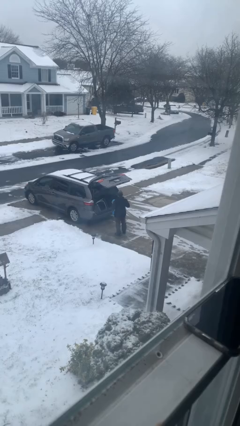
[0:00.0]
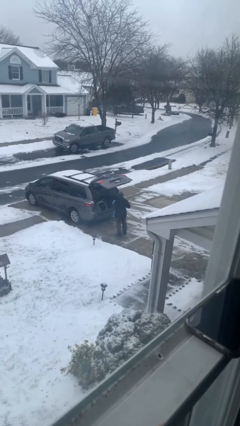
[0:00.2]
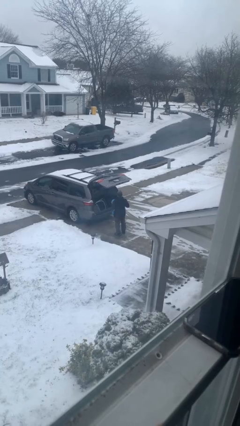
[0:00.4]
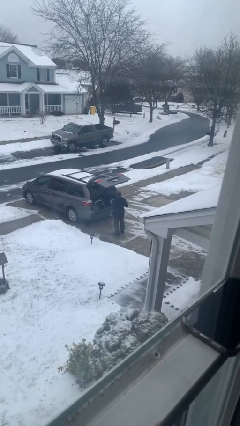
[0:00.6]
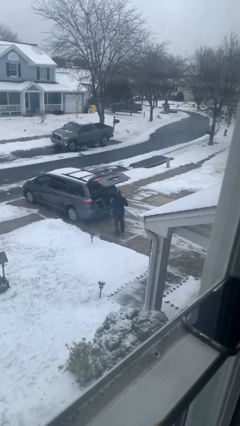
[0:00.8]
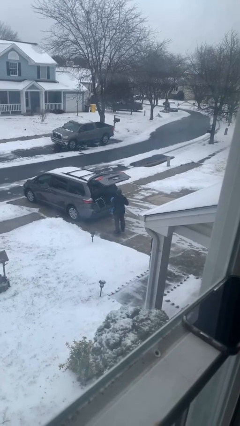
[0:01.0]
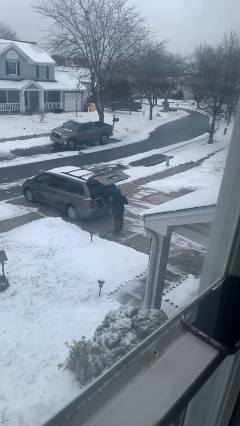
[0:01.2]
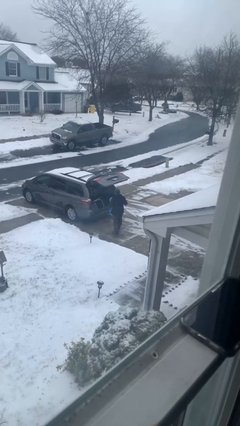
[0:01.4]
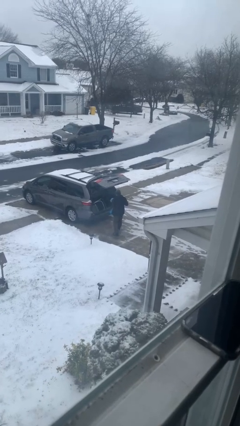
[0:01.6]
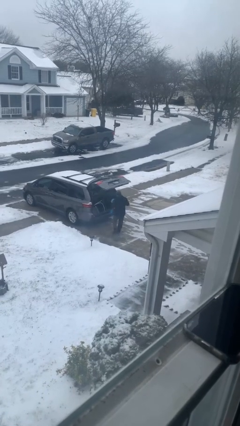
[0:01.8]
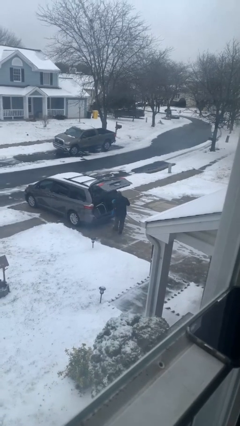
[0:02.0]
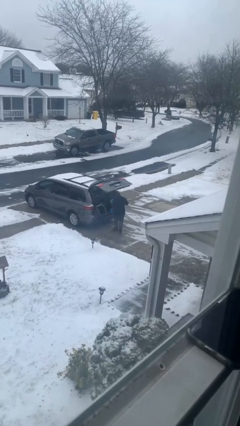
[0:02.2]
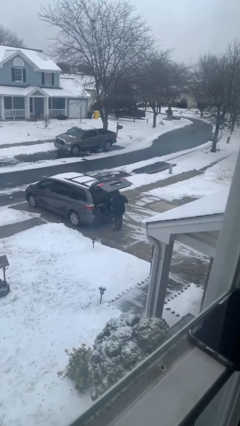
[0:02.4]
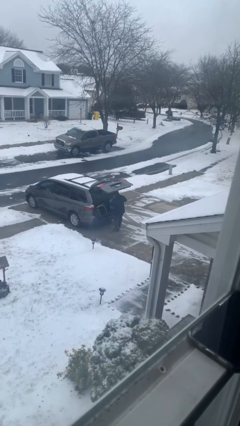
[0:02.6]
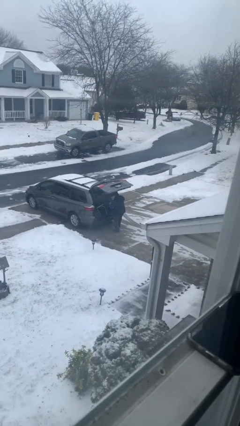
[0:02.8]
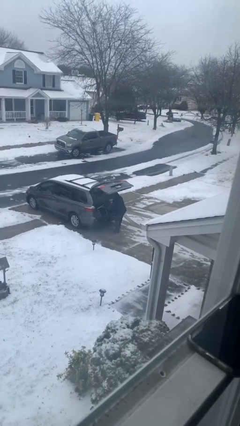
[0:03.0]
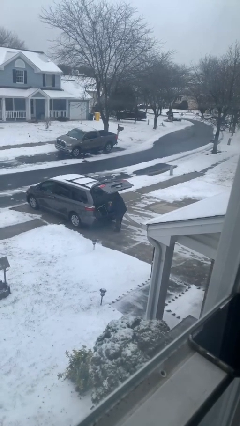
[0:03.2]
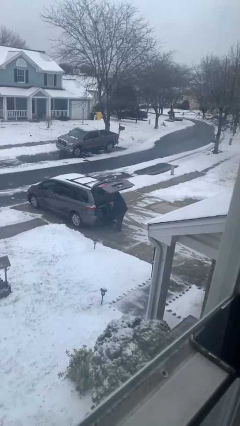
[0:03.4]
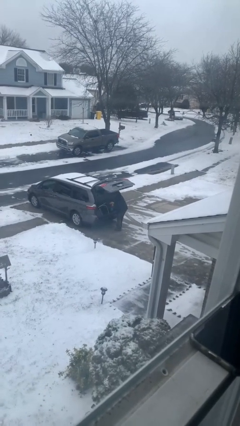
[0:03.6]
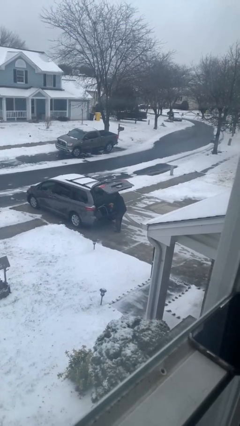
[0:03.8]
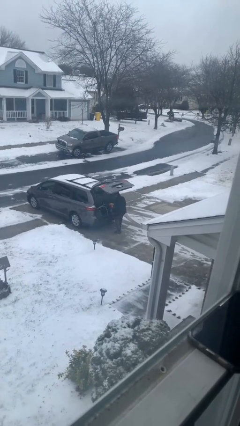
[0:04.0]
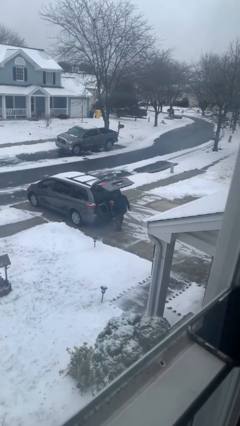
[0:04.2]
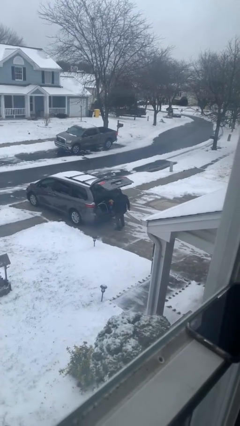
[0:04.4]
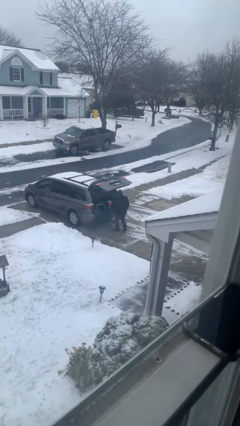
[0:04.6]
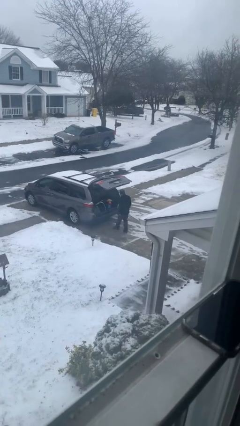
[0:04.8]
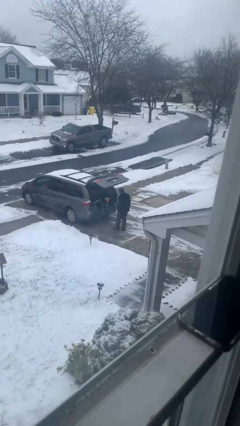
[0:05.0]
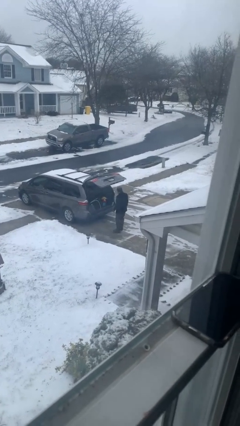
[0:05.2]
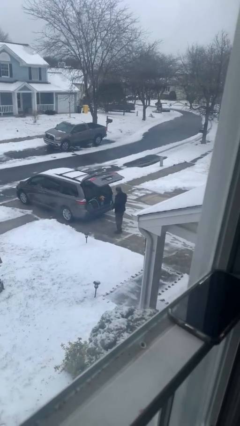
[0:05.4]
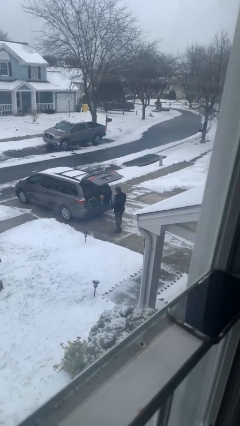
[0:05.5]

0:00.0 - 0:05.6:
person loads car

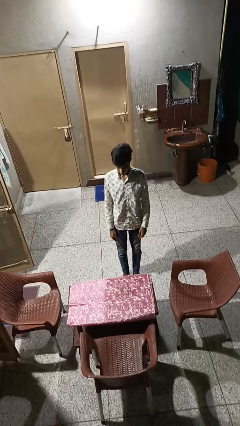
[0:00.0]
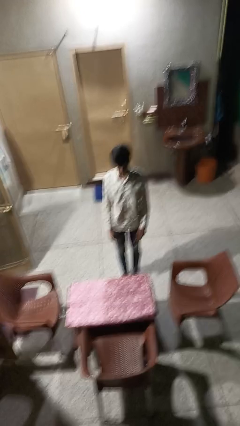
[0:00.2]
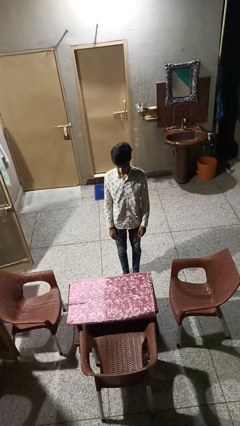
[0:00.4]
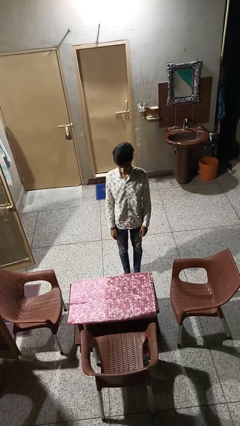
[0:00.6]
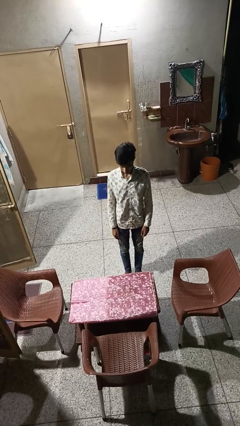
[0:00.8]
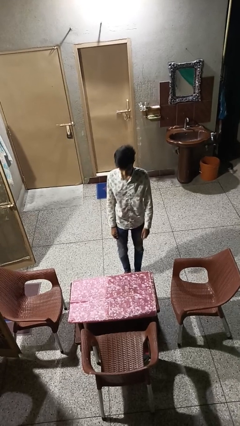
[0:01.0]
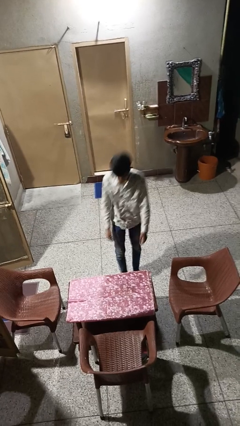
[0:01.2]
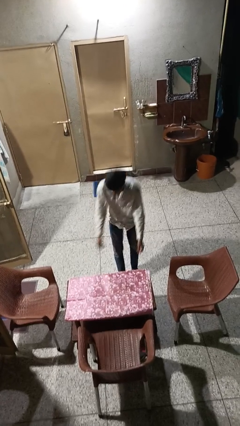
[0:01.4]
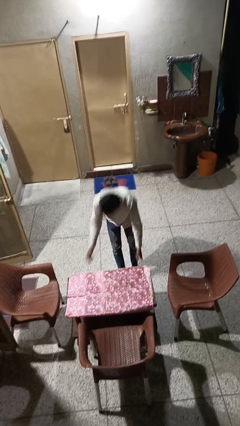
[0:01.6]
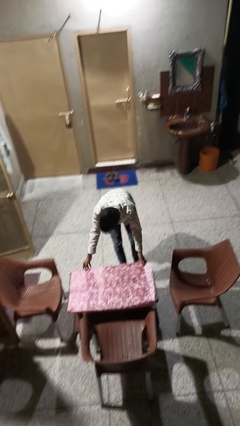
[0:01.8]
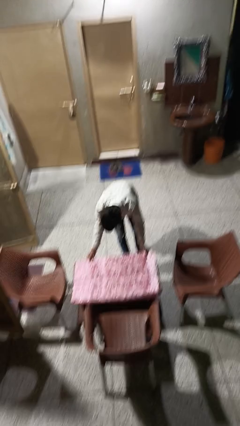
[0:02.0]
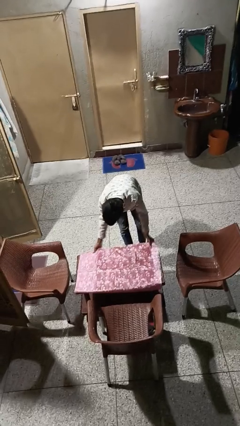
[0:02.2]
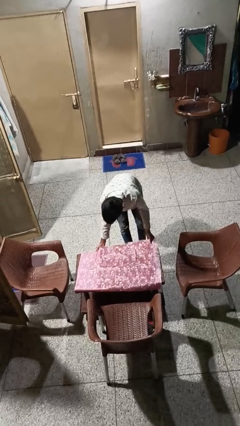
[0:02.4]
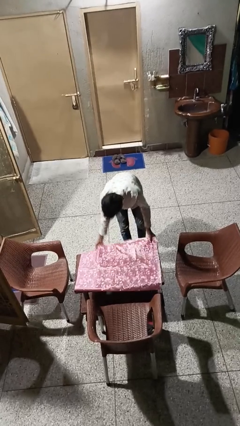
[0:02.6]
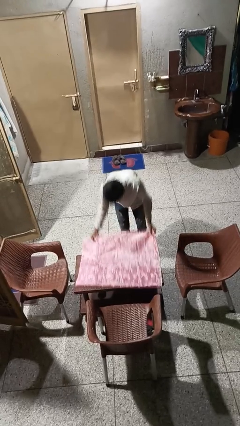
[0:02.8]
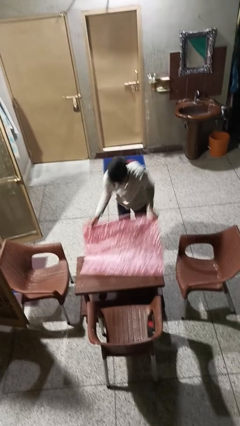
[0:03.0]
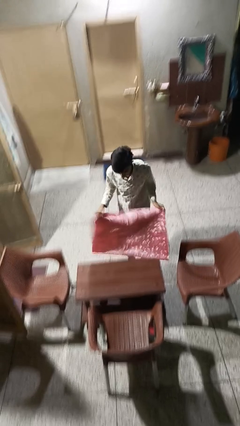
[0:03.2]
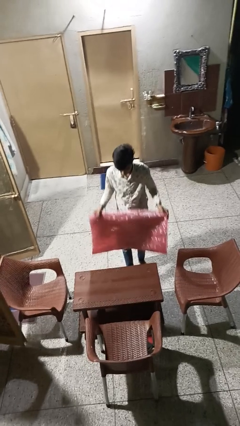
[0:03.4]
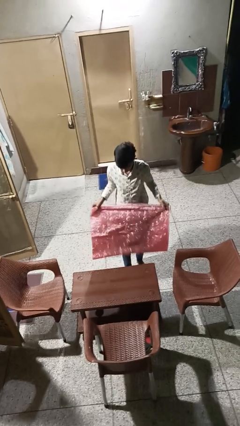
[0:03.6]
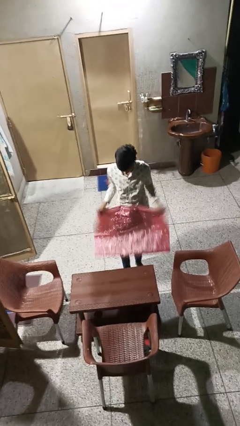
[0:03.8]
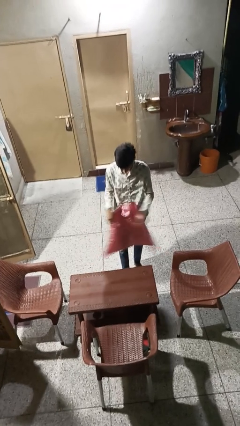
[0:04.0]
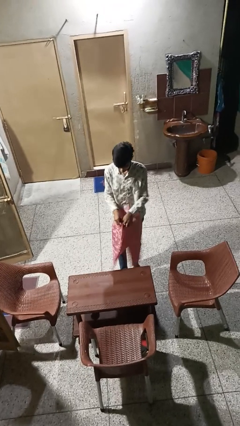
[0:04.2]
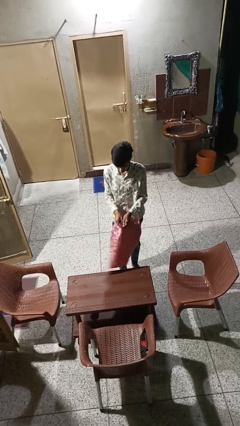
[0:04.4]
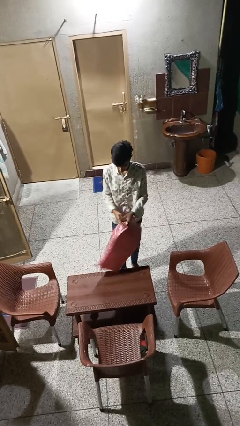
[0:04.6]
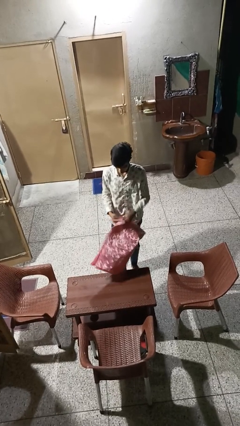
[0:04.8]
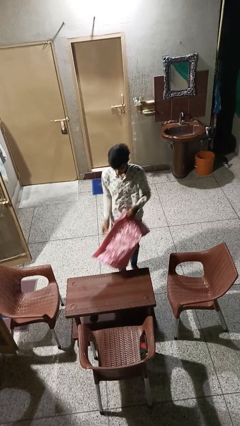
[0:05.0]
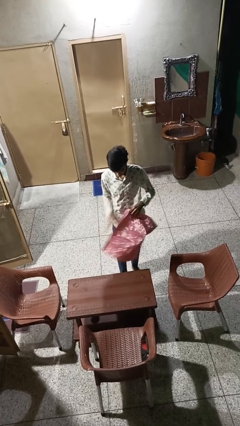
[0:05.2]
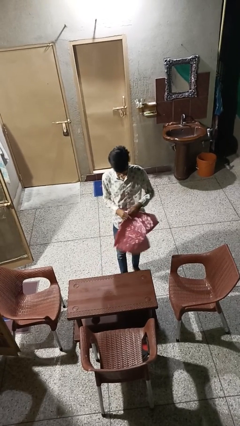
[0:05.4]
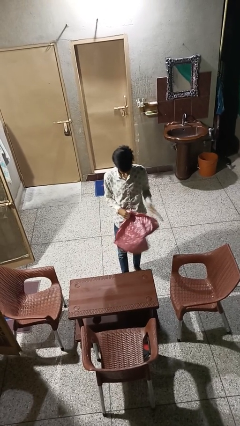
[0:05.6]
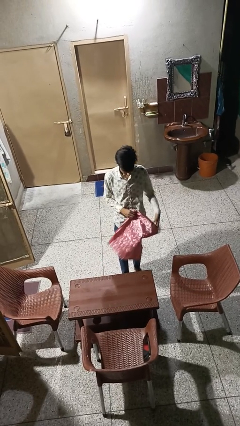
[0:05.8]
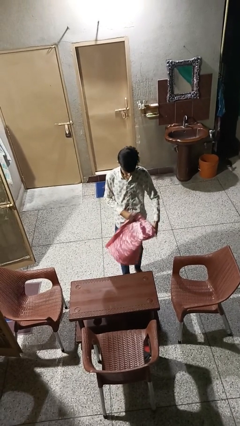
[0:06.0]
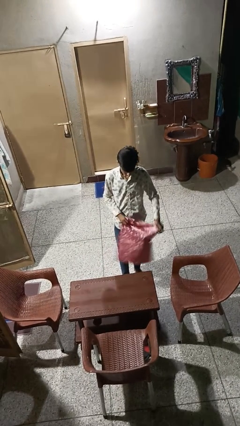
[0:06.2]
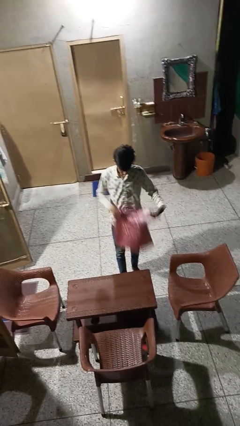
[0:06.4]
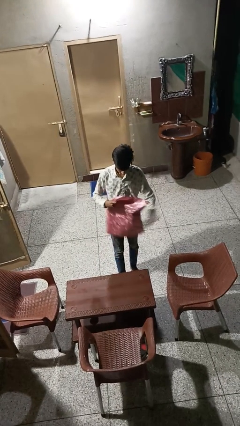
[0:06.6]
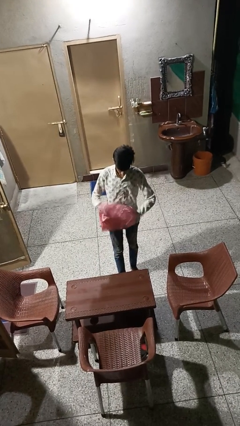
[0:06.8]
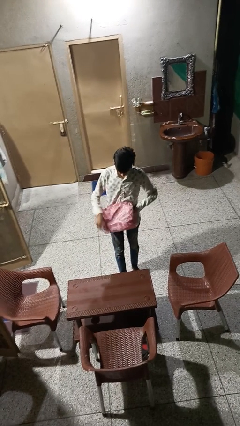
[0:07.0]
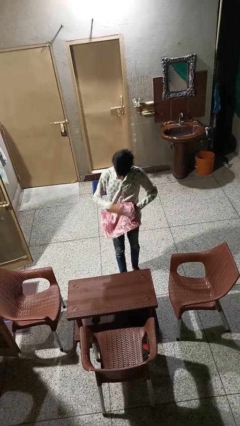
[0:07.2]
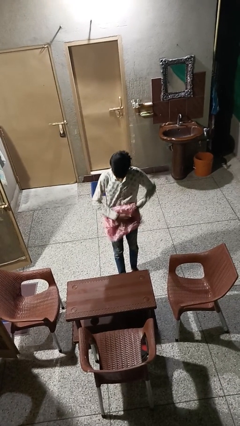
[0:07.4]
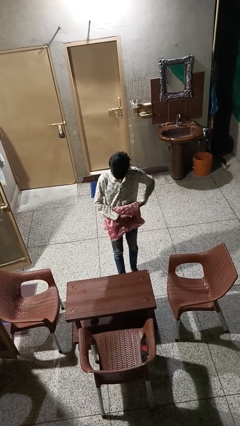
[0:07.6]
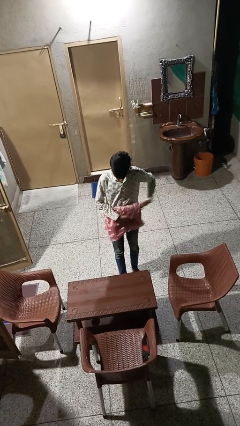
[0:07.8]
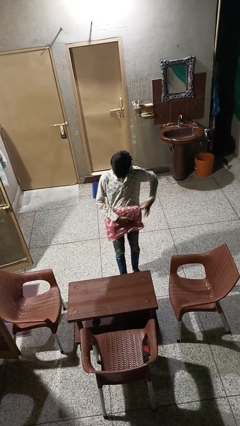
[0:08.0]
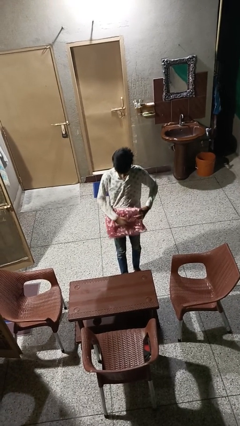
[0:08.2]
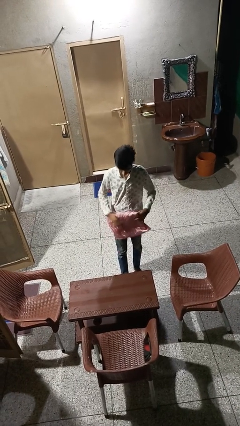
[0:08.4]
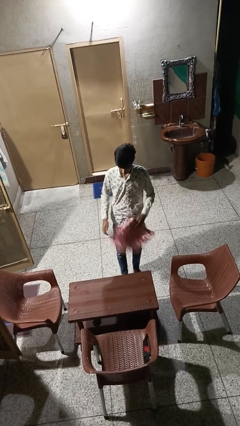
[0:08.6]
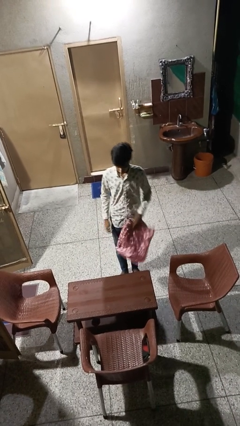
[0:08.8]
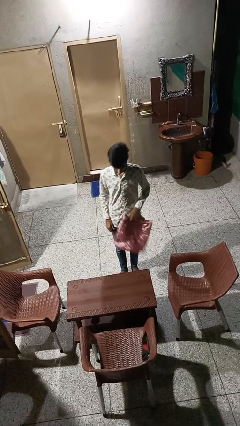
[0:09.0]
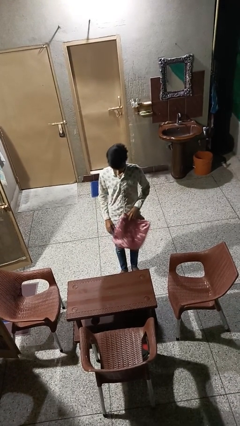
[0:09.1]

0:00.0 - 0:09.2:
person folds tablecloth

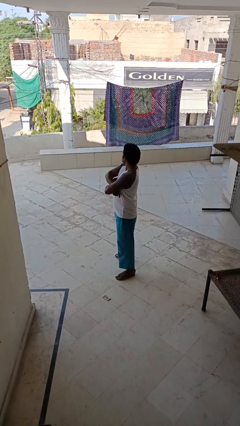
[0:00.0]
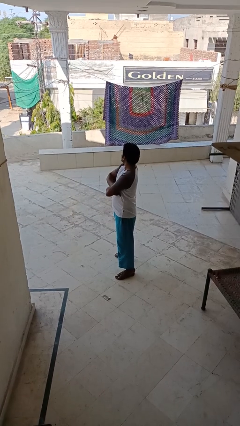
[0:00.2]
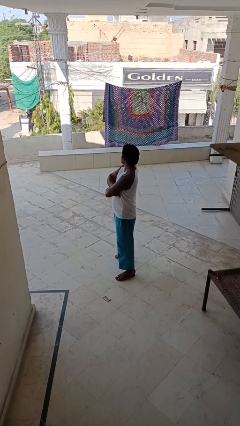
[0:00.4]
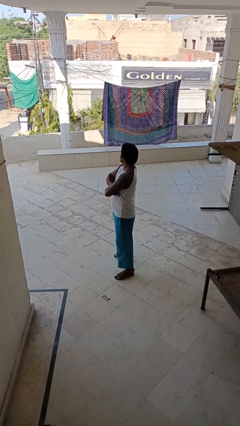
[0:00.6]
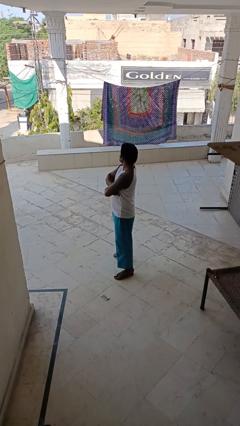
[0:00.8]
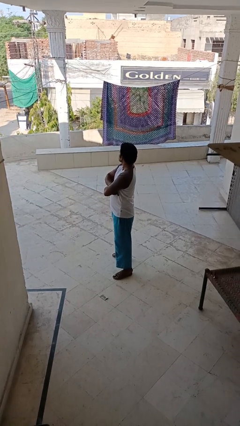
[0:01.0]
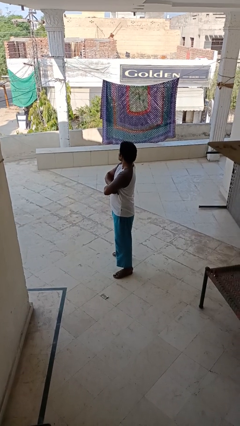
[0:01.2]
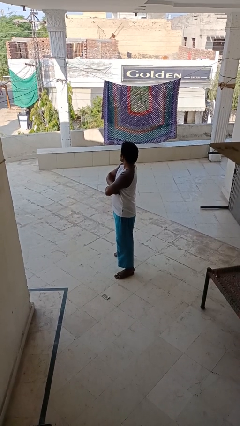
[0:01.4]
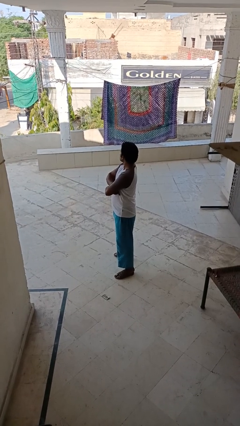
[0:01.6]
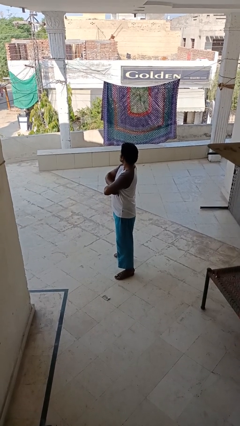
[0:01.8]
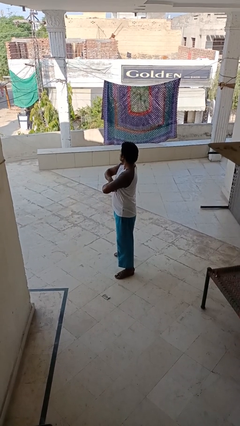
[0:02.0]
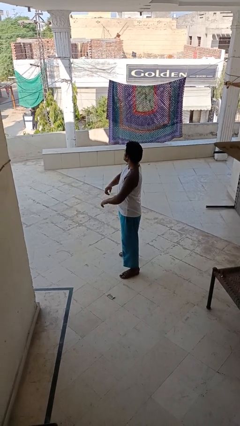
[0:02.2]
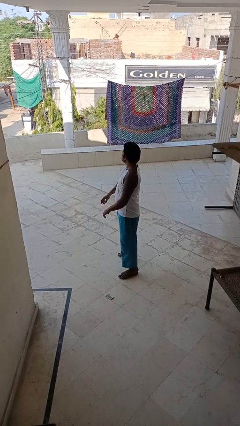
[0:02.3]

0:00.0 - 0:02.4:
person crosses arms

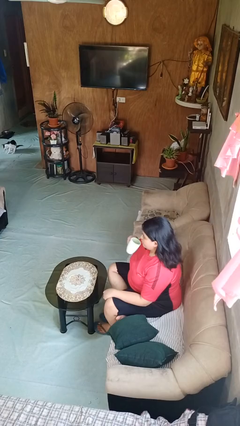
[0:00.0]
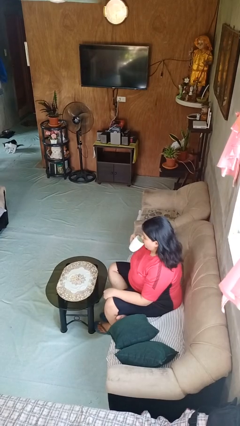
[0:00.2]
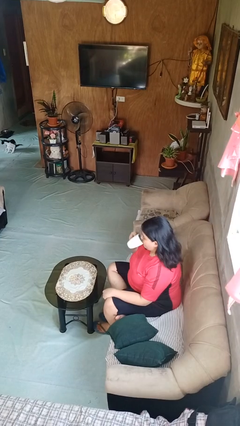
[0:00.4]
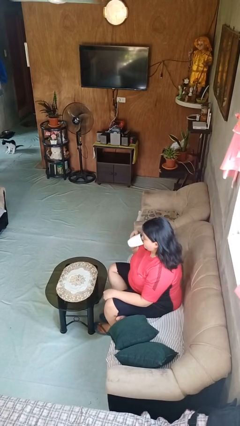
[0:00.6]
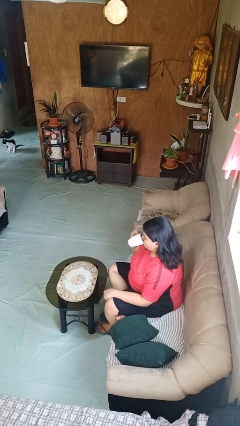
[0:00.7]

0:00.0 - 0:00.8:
person drinks from mug
